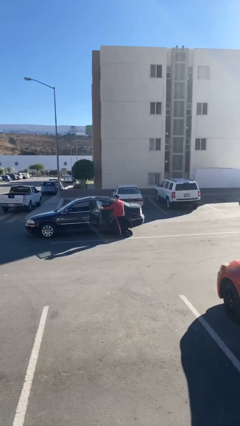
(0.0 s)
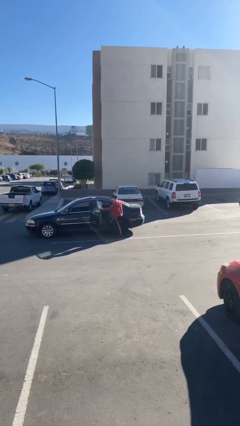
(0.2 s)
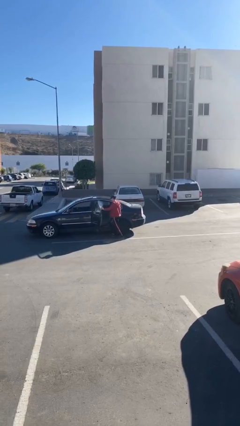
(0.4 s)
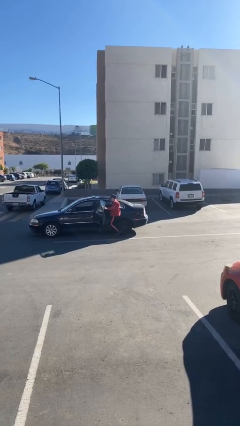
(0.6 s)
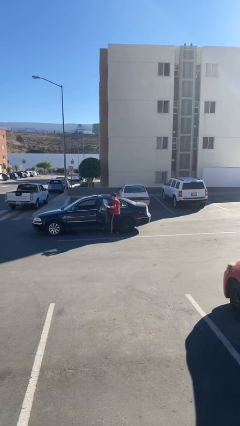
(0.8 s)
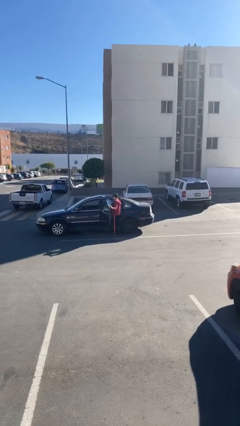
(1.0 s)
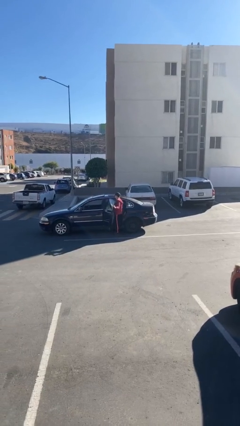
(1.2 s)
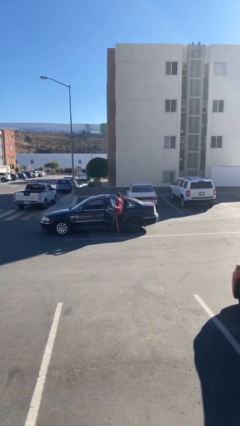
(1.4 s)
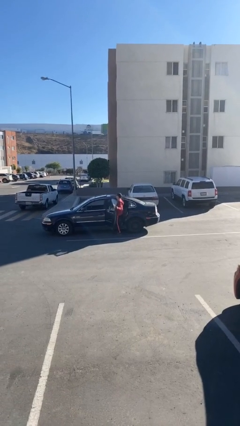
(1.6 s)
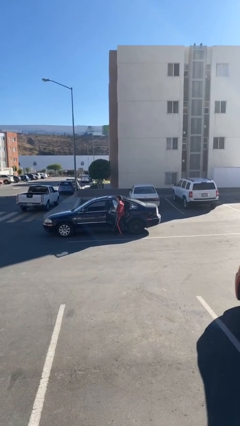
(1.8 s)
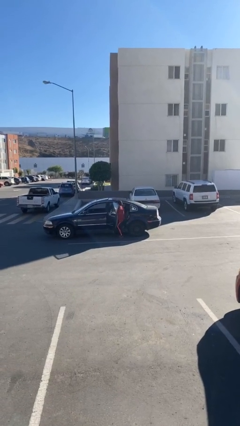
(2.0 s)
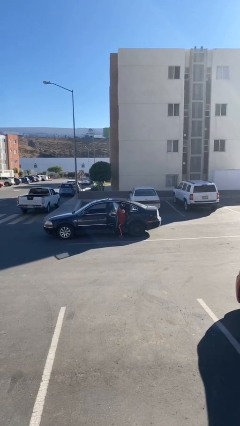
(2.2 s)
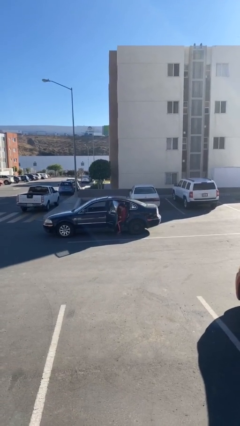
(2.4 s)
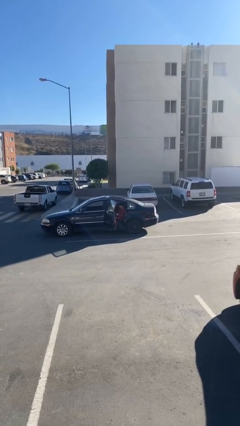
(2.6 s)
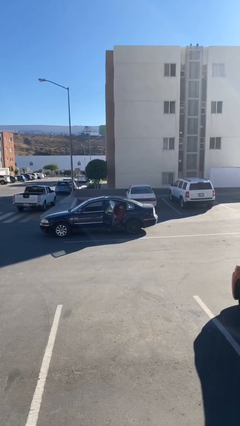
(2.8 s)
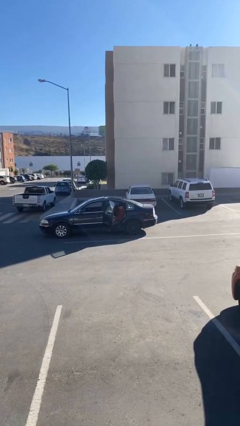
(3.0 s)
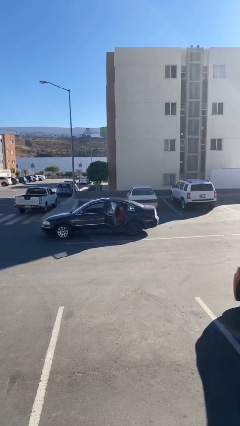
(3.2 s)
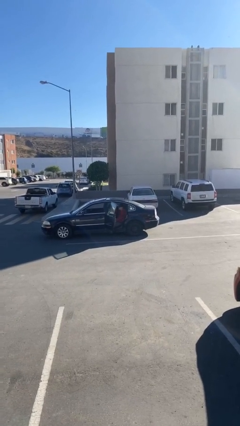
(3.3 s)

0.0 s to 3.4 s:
person enters car

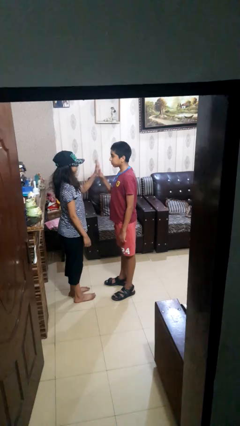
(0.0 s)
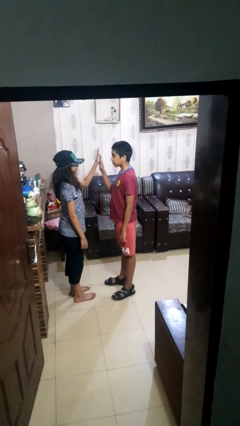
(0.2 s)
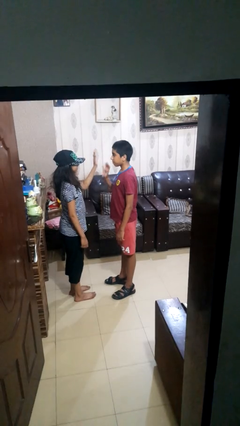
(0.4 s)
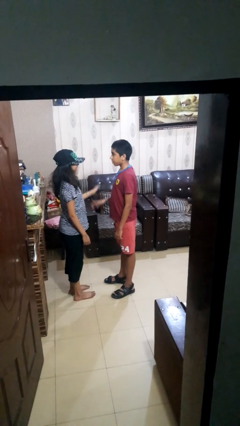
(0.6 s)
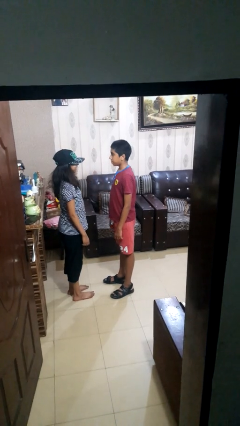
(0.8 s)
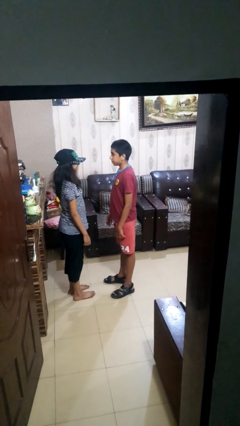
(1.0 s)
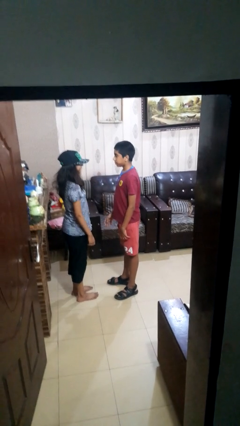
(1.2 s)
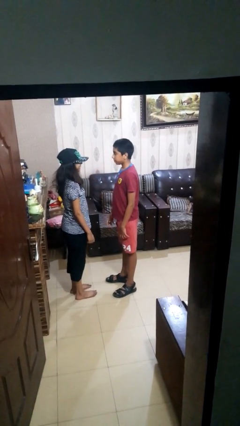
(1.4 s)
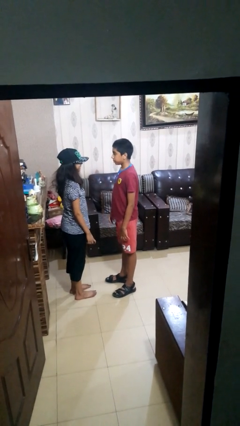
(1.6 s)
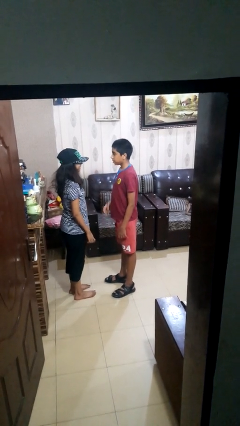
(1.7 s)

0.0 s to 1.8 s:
person highfives hand

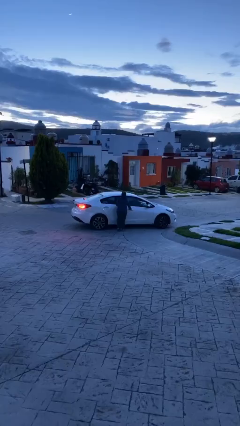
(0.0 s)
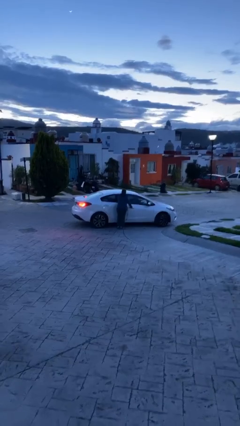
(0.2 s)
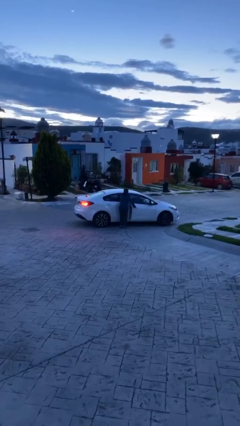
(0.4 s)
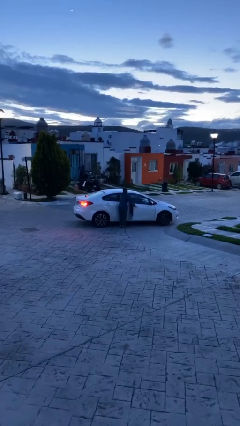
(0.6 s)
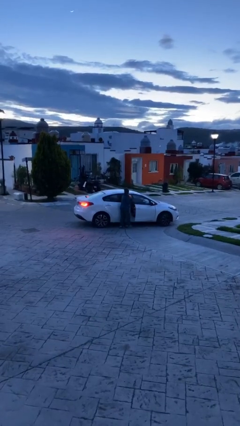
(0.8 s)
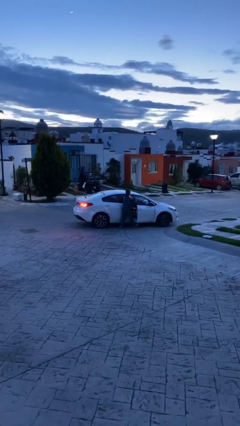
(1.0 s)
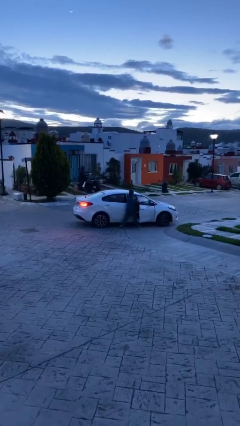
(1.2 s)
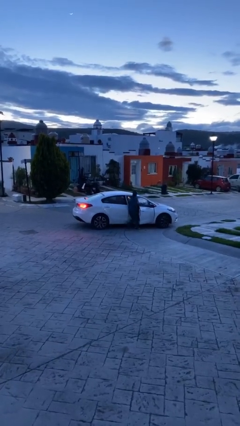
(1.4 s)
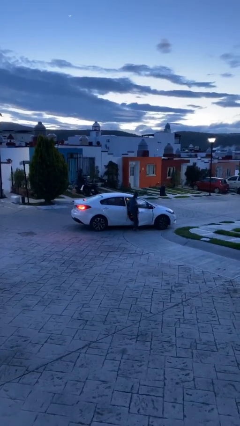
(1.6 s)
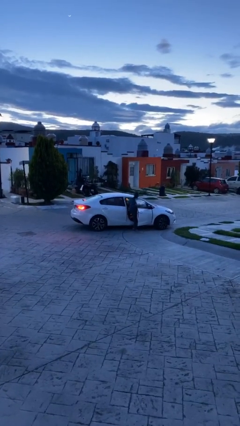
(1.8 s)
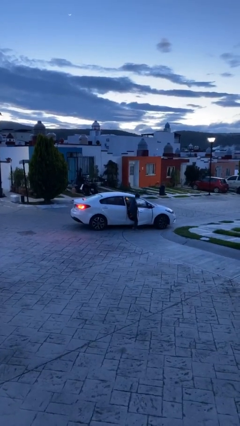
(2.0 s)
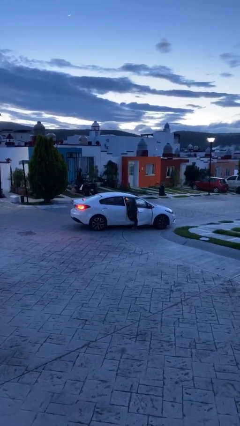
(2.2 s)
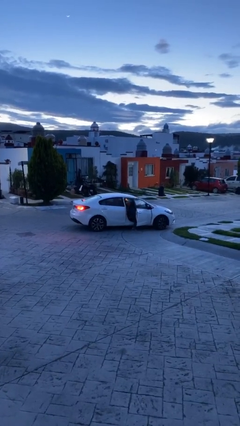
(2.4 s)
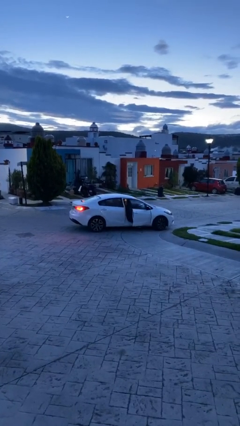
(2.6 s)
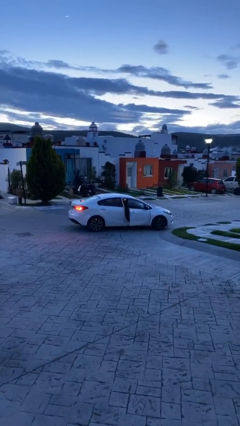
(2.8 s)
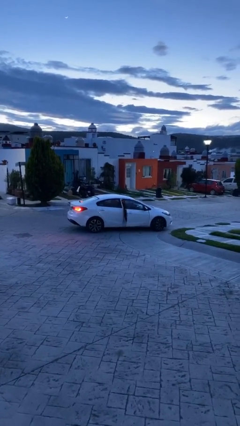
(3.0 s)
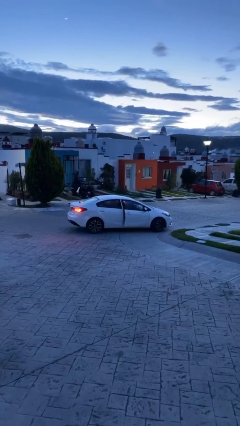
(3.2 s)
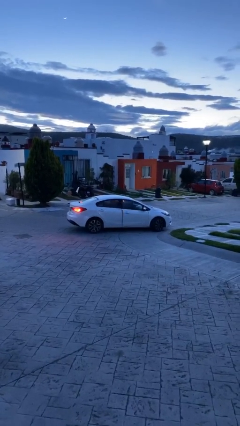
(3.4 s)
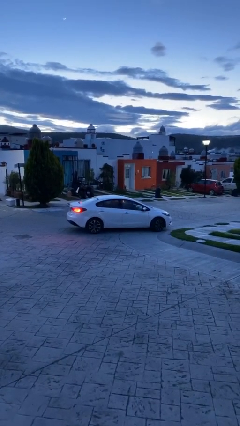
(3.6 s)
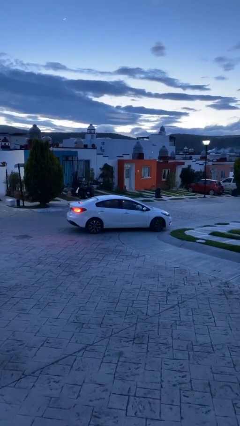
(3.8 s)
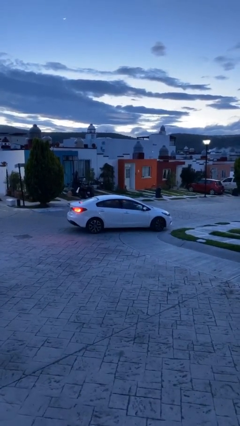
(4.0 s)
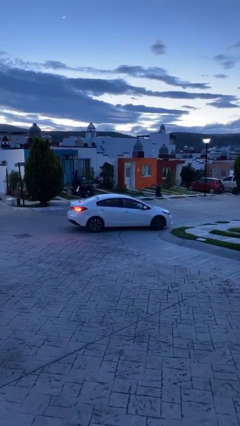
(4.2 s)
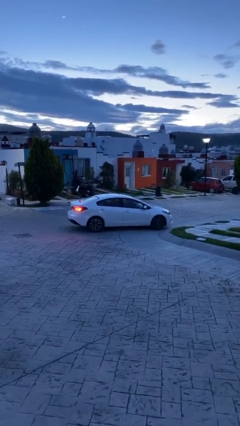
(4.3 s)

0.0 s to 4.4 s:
car picks up person

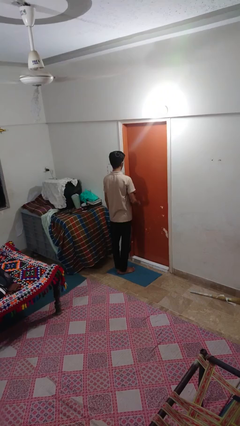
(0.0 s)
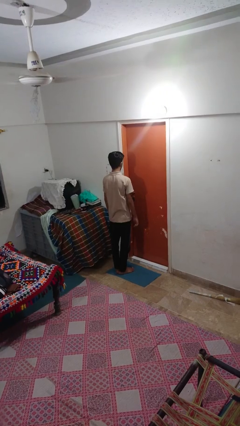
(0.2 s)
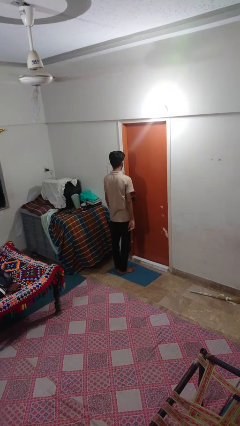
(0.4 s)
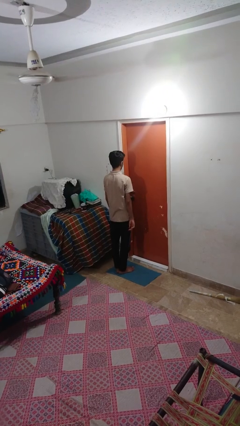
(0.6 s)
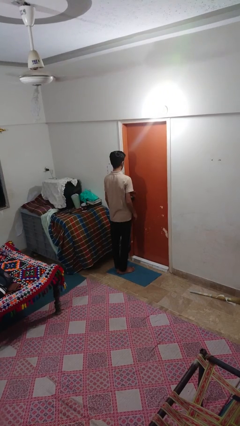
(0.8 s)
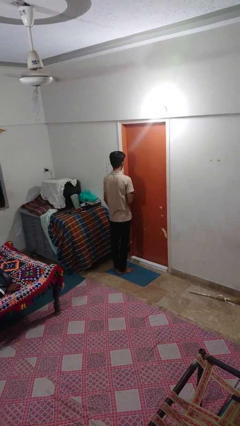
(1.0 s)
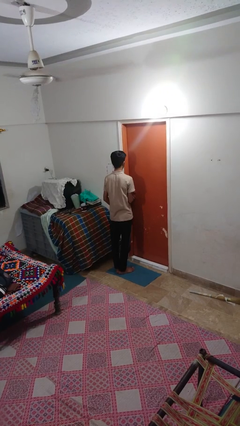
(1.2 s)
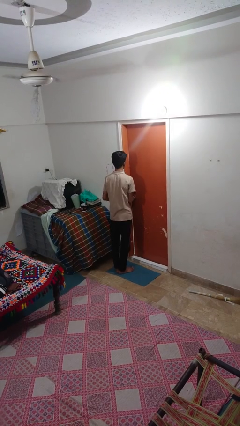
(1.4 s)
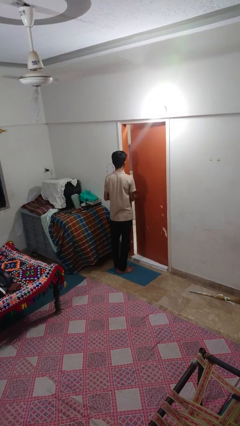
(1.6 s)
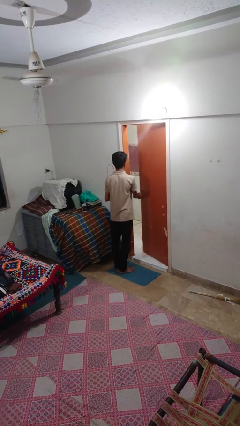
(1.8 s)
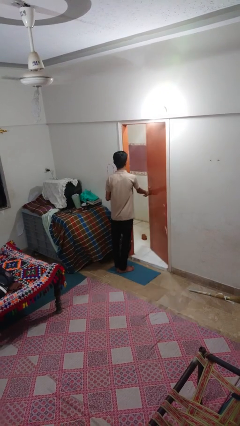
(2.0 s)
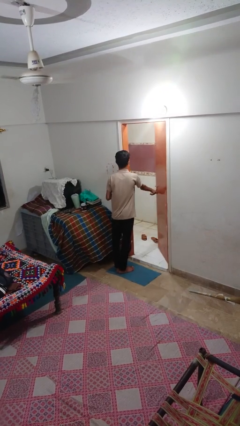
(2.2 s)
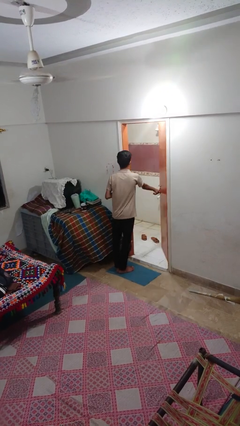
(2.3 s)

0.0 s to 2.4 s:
person opens facility door

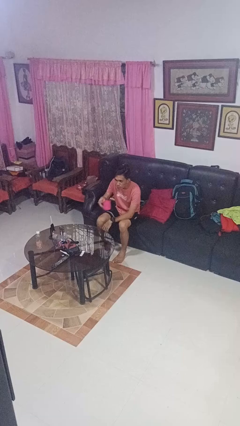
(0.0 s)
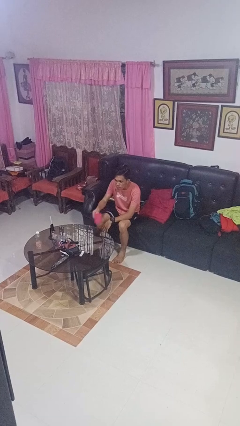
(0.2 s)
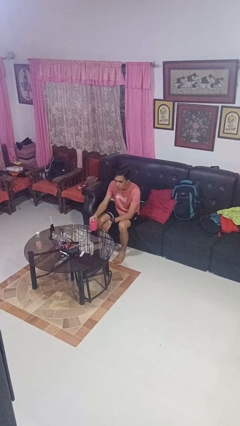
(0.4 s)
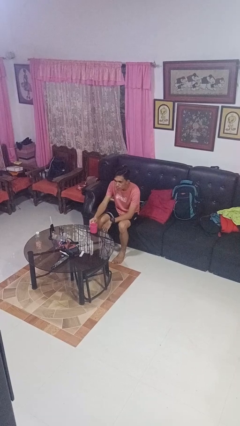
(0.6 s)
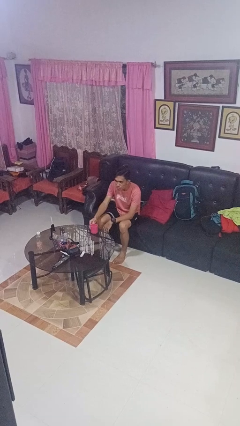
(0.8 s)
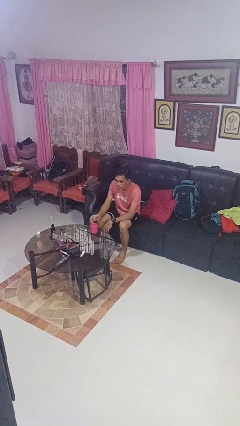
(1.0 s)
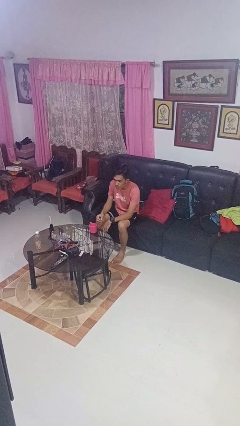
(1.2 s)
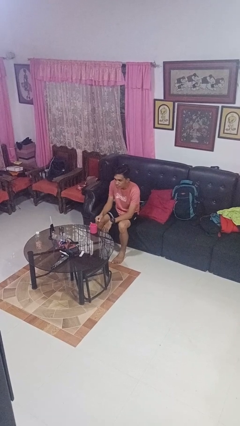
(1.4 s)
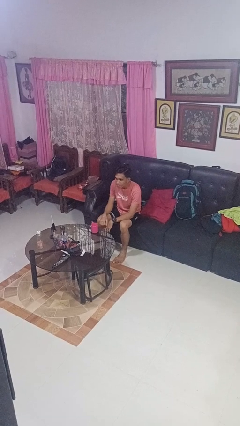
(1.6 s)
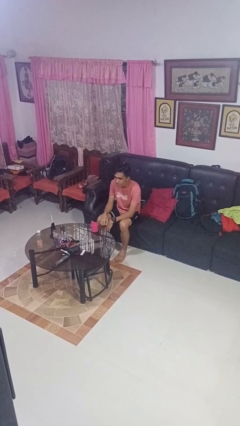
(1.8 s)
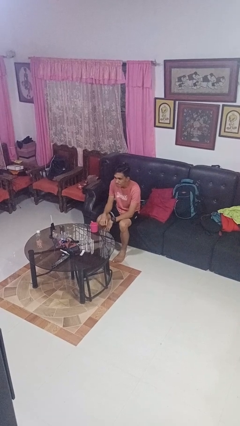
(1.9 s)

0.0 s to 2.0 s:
person puts down object on table

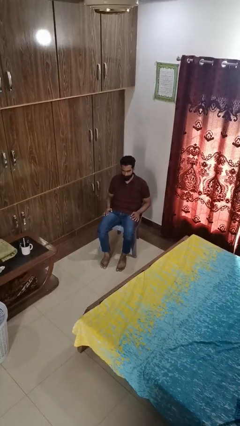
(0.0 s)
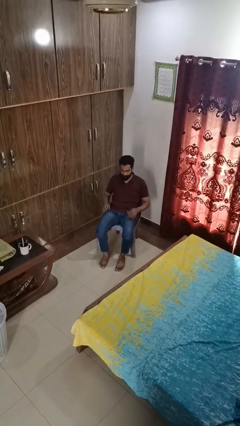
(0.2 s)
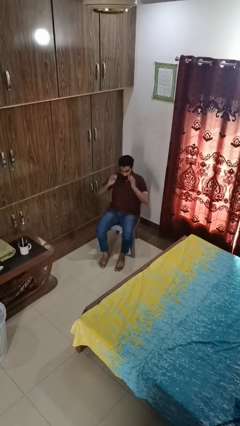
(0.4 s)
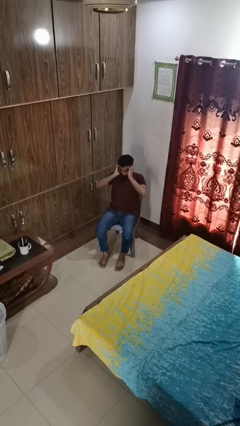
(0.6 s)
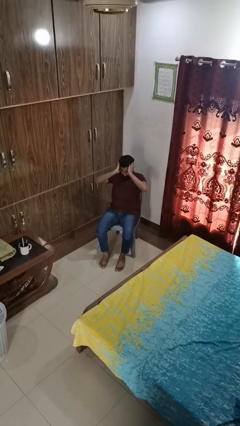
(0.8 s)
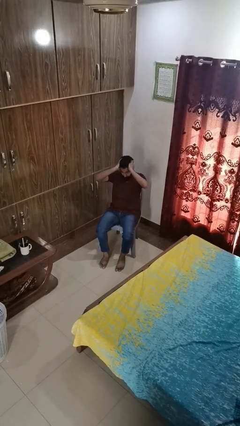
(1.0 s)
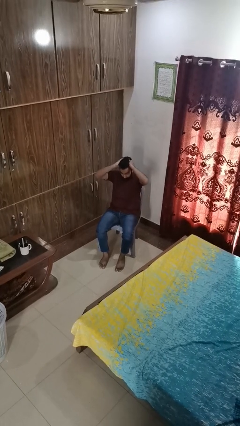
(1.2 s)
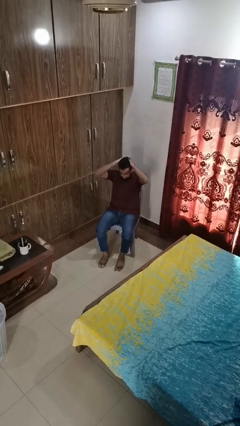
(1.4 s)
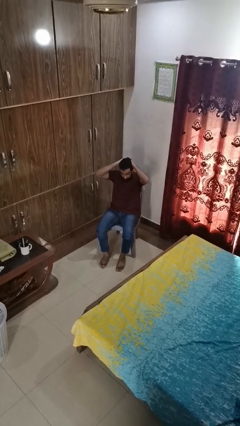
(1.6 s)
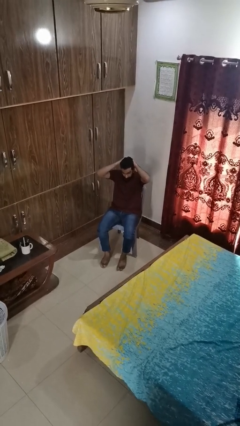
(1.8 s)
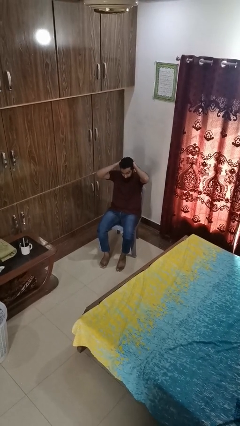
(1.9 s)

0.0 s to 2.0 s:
person strokes hair

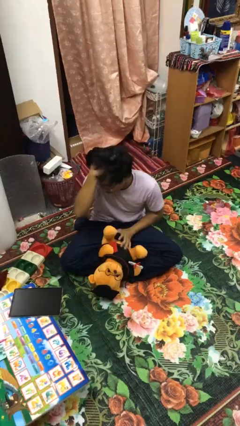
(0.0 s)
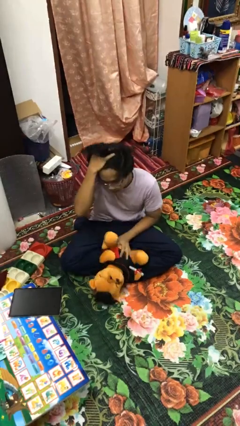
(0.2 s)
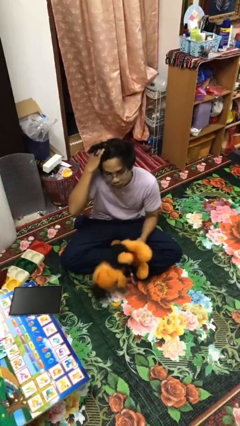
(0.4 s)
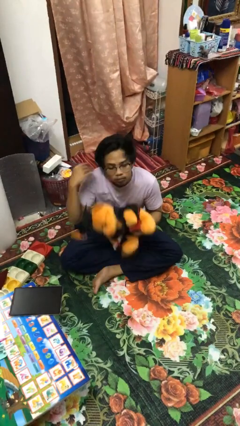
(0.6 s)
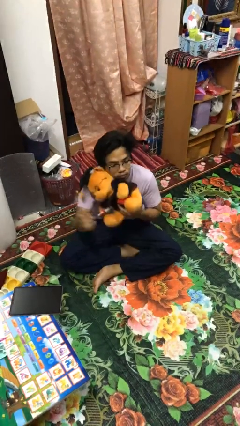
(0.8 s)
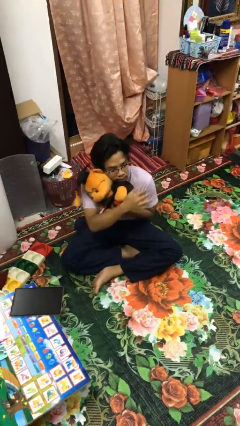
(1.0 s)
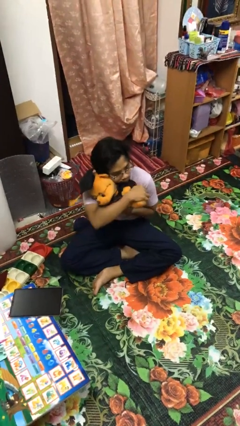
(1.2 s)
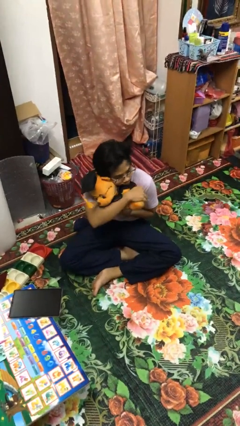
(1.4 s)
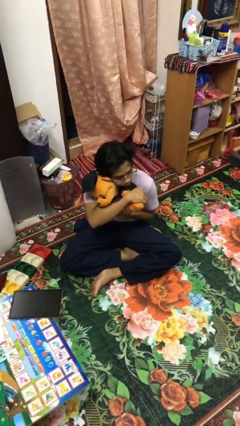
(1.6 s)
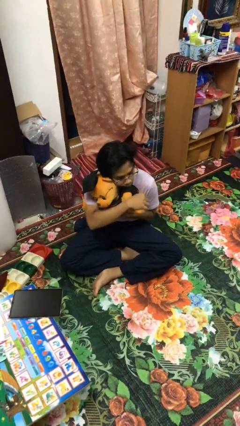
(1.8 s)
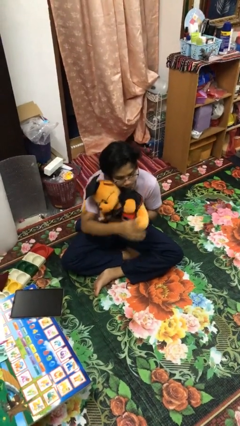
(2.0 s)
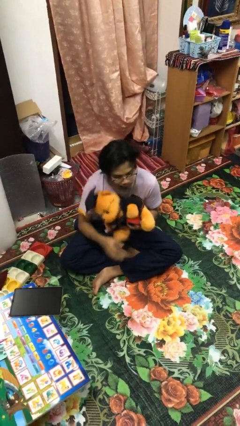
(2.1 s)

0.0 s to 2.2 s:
person hugs stuffed animal
